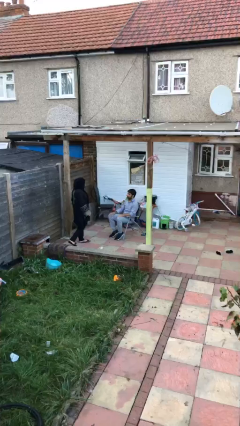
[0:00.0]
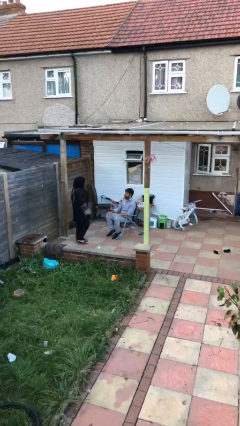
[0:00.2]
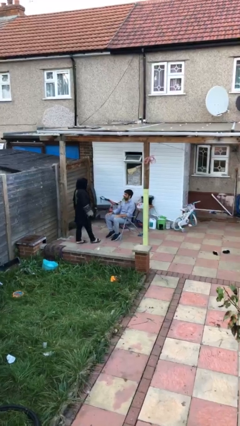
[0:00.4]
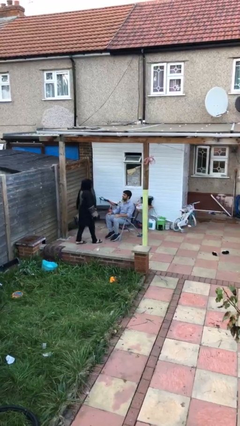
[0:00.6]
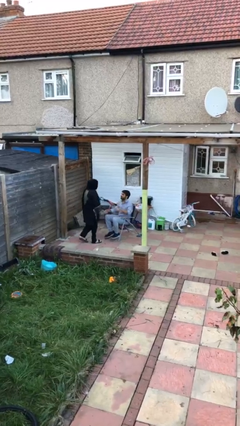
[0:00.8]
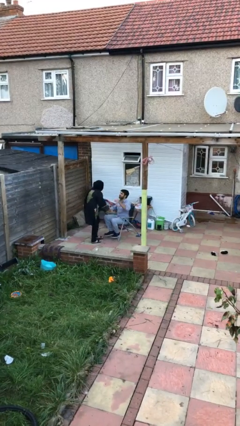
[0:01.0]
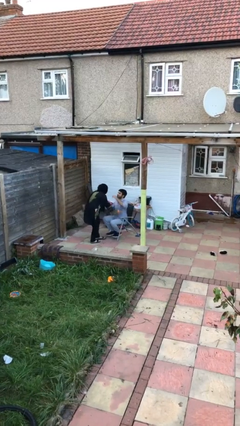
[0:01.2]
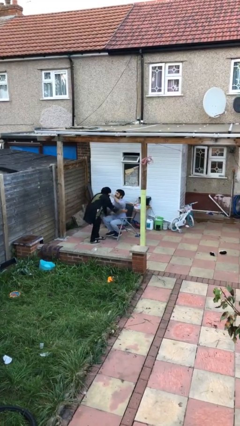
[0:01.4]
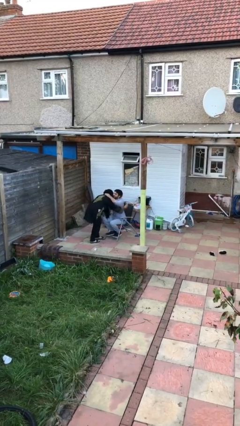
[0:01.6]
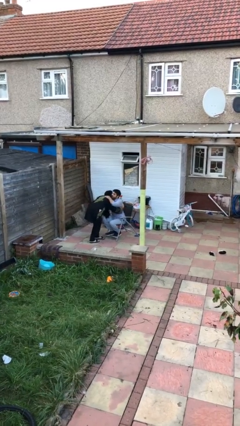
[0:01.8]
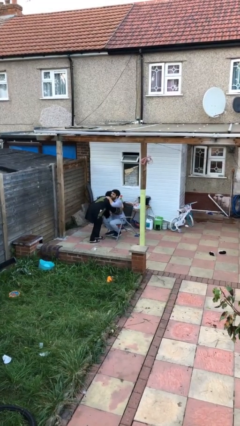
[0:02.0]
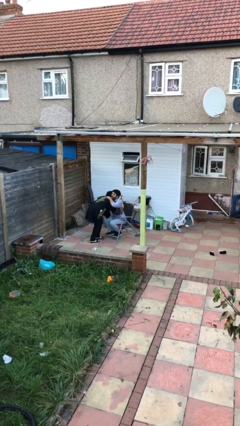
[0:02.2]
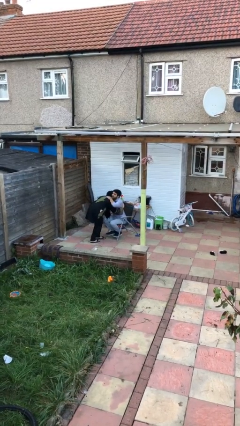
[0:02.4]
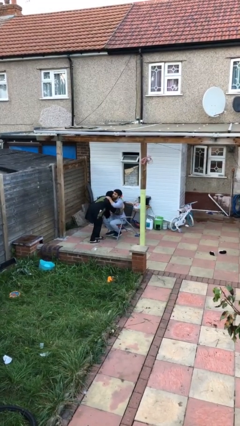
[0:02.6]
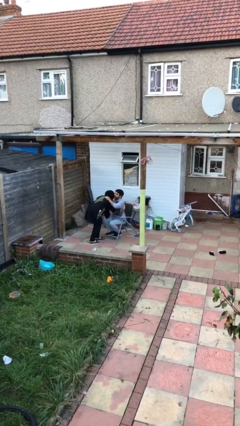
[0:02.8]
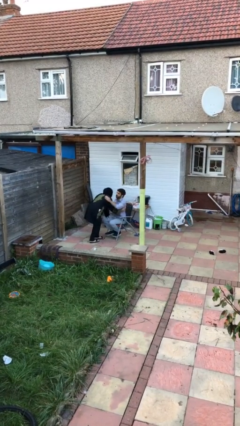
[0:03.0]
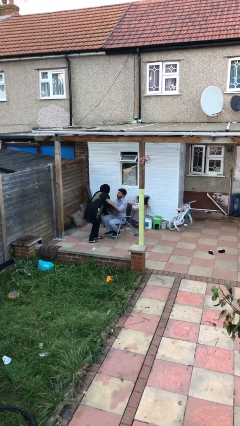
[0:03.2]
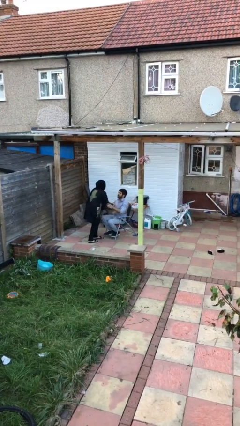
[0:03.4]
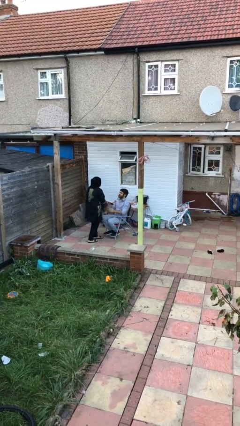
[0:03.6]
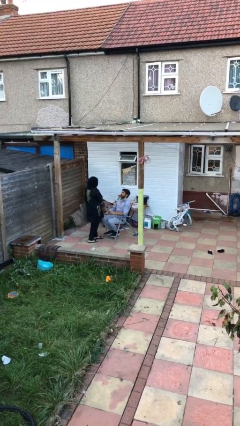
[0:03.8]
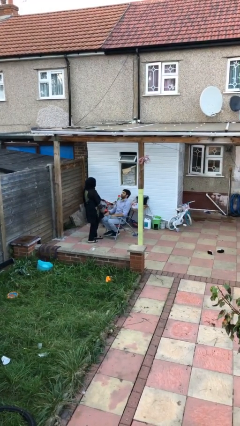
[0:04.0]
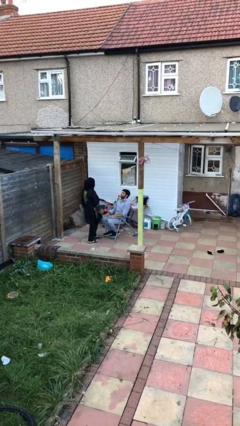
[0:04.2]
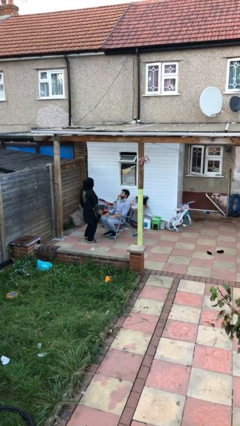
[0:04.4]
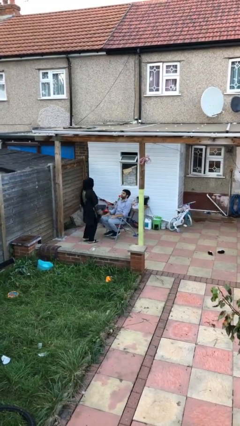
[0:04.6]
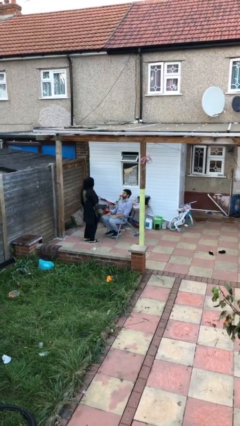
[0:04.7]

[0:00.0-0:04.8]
person embraces person

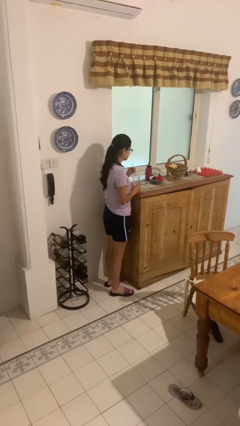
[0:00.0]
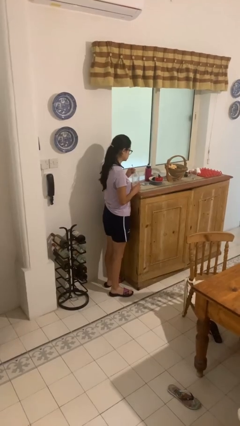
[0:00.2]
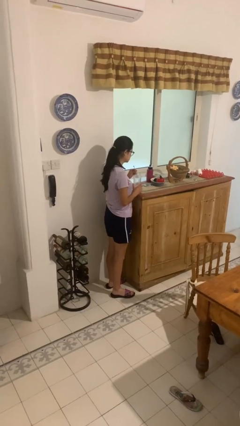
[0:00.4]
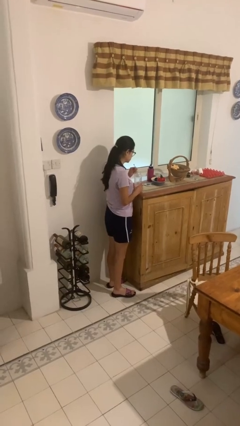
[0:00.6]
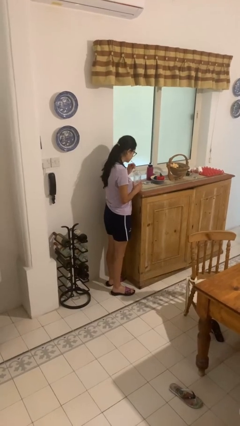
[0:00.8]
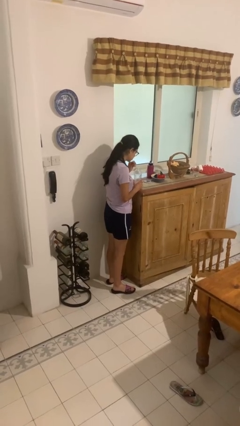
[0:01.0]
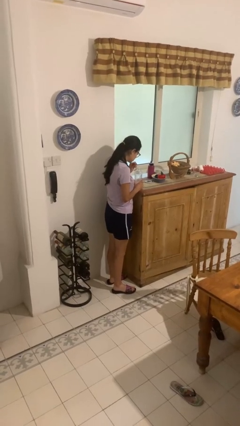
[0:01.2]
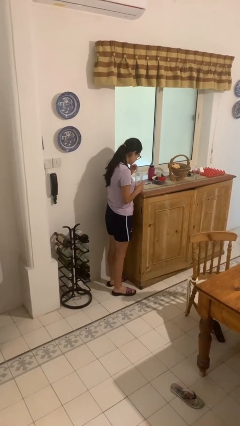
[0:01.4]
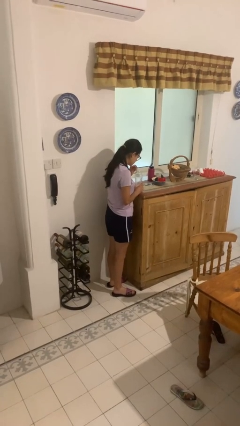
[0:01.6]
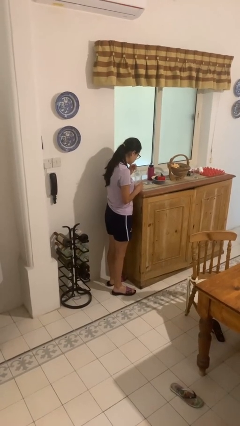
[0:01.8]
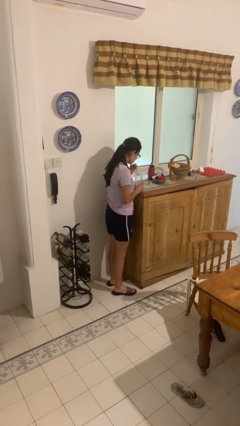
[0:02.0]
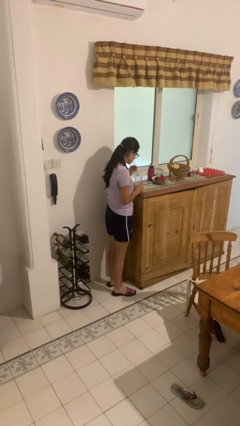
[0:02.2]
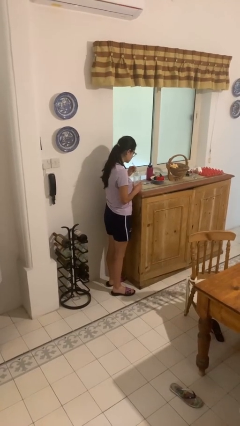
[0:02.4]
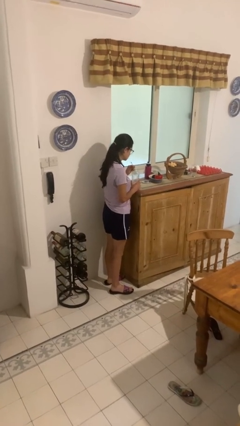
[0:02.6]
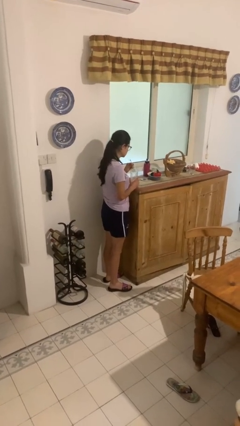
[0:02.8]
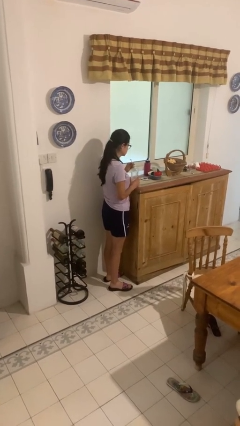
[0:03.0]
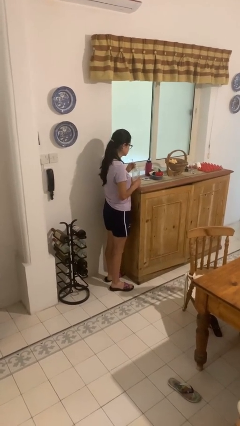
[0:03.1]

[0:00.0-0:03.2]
person drinks from straw

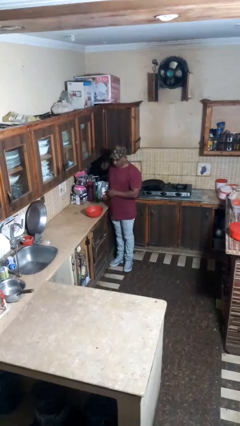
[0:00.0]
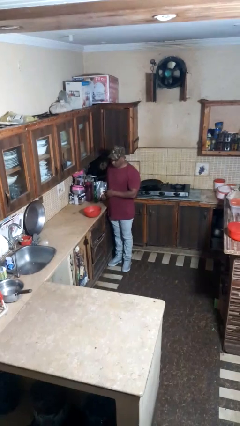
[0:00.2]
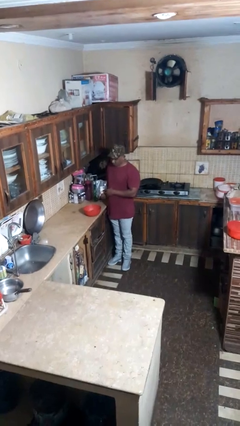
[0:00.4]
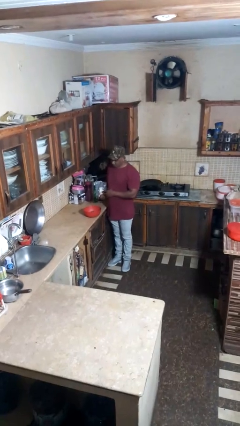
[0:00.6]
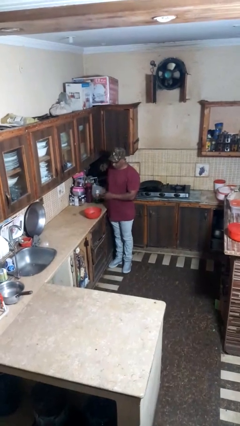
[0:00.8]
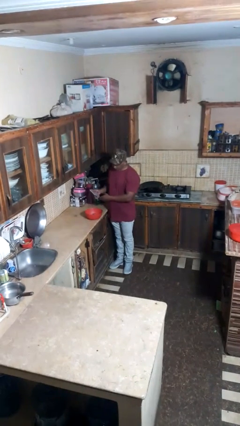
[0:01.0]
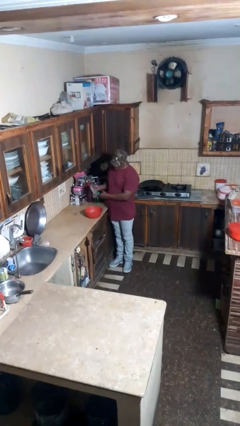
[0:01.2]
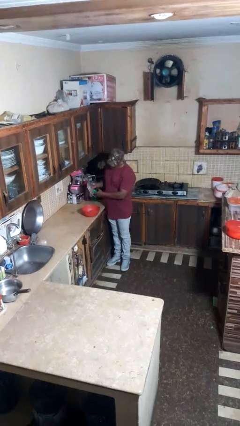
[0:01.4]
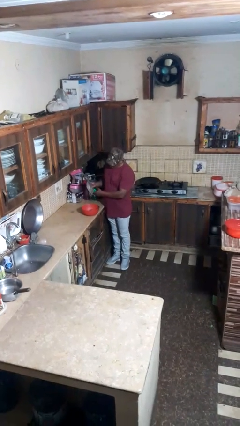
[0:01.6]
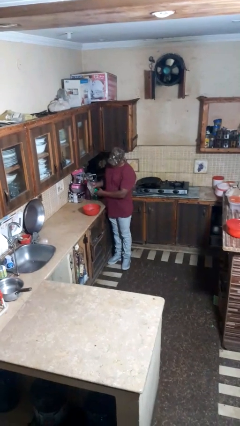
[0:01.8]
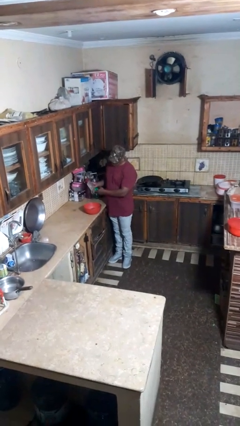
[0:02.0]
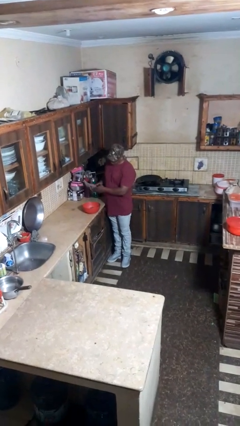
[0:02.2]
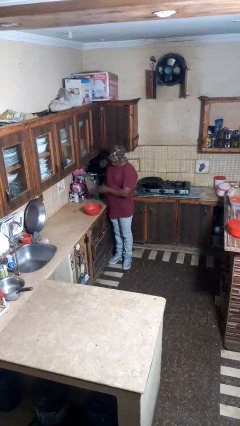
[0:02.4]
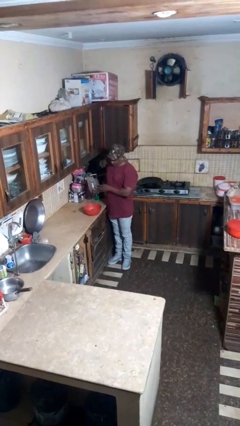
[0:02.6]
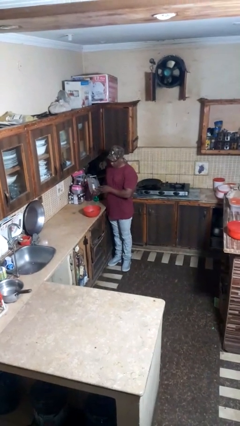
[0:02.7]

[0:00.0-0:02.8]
person pours into bowl

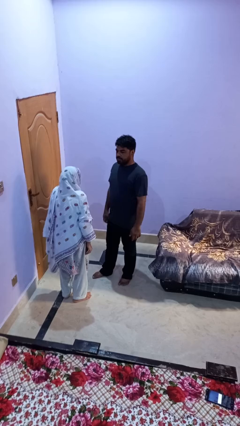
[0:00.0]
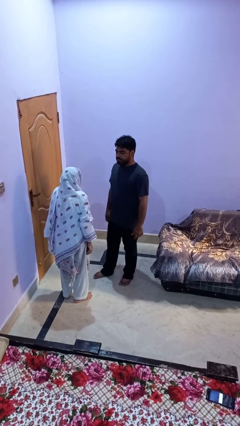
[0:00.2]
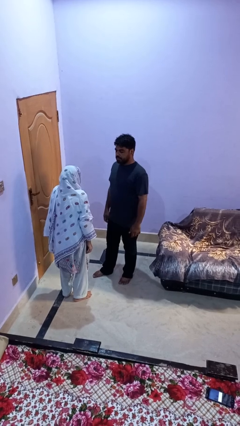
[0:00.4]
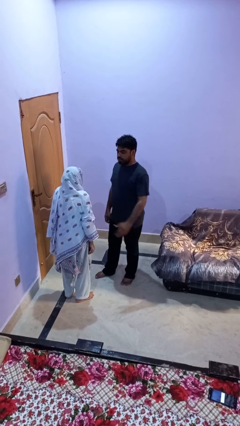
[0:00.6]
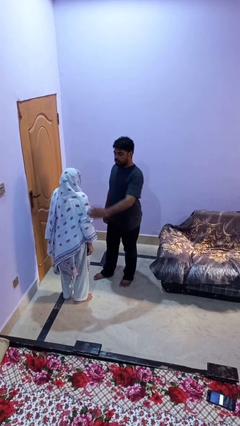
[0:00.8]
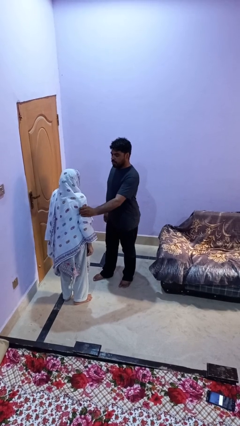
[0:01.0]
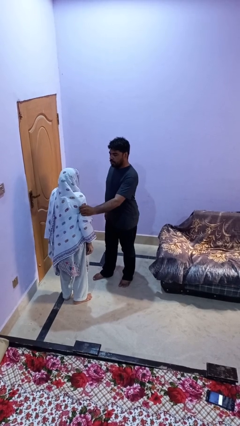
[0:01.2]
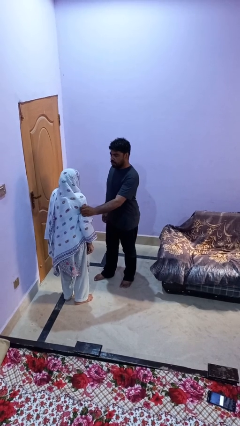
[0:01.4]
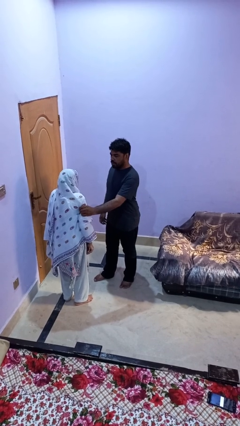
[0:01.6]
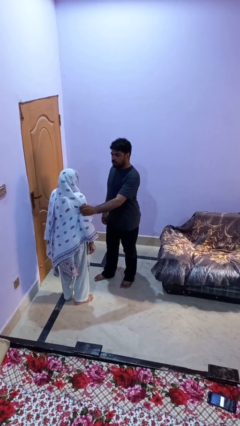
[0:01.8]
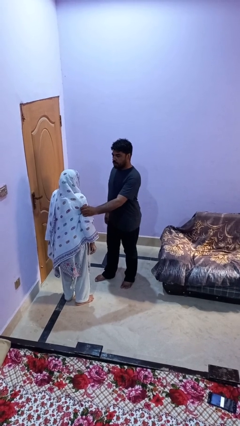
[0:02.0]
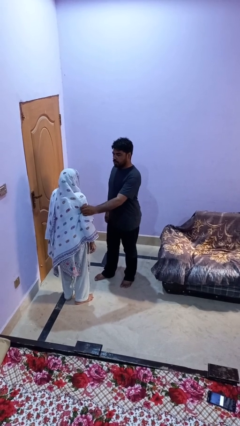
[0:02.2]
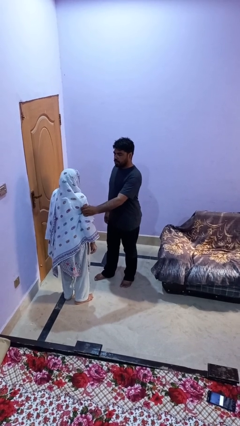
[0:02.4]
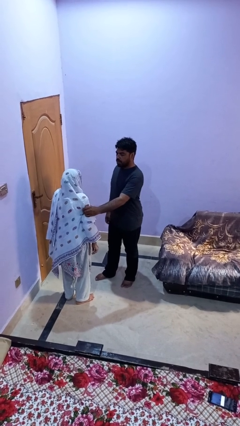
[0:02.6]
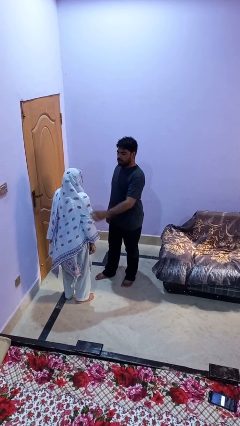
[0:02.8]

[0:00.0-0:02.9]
person grabs person by bicep

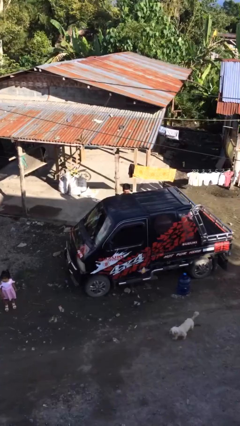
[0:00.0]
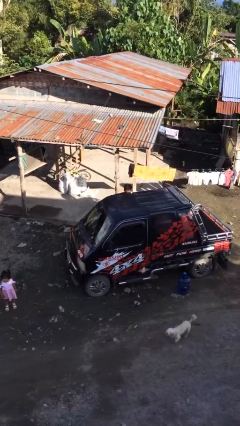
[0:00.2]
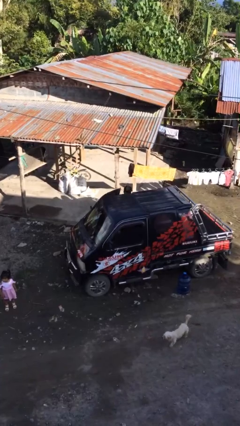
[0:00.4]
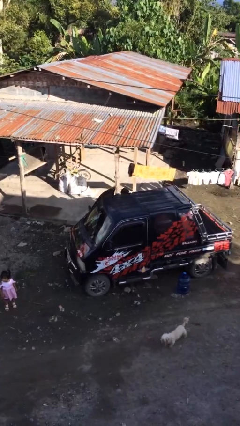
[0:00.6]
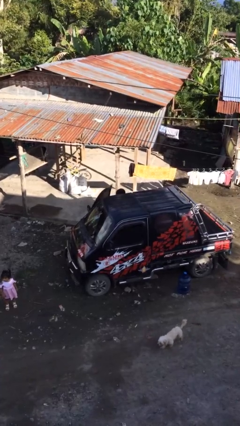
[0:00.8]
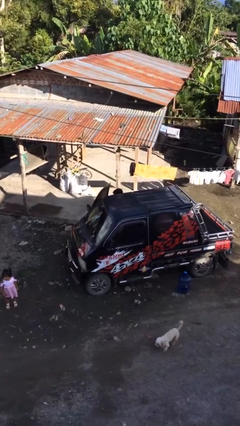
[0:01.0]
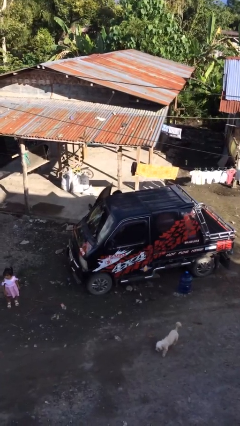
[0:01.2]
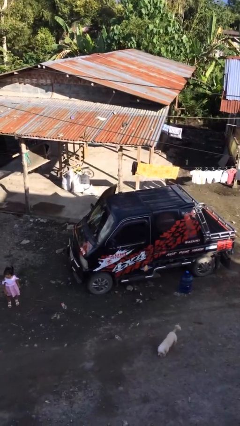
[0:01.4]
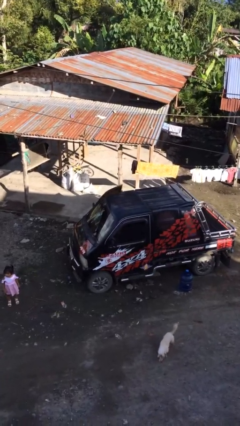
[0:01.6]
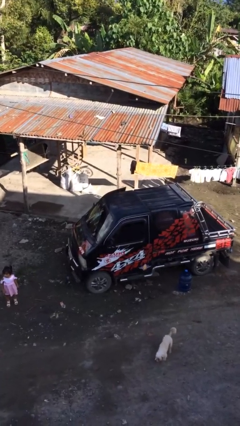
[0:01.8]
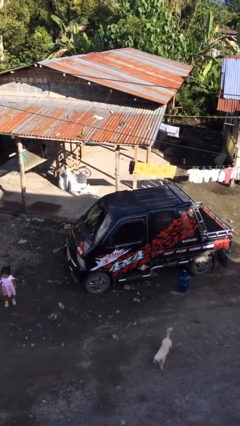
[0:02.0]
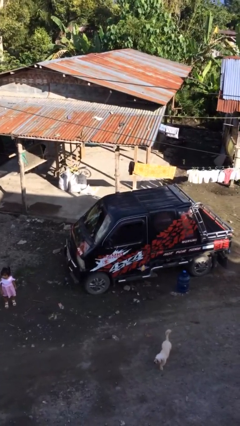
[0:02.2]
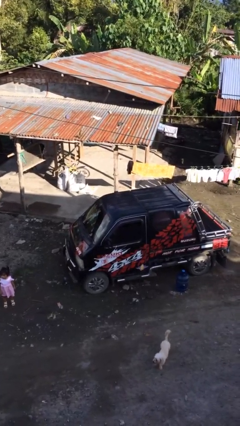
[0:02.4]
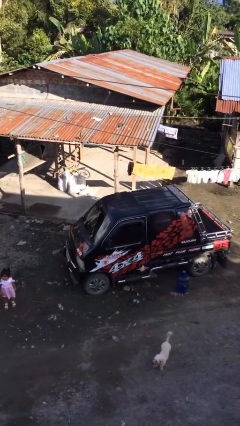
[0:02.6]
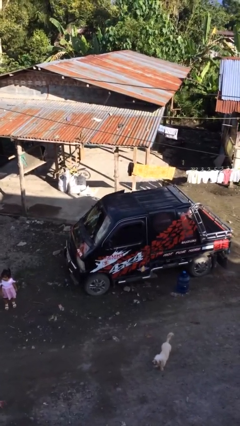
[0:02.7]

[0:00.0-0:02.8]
person enters car

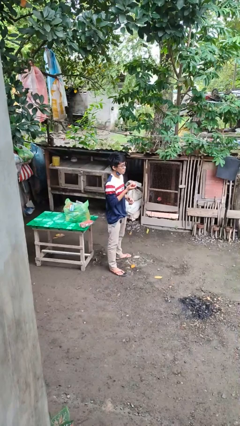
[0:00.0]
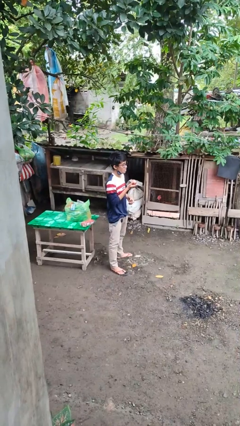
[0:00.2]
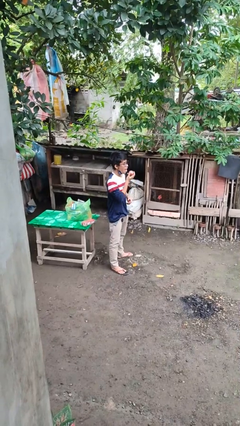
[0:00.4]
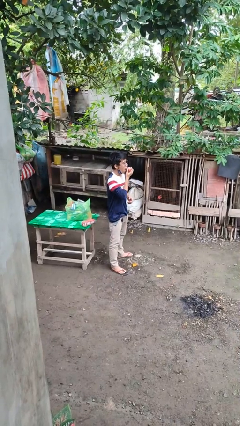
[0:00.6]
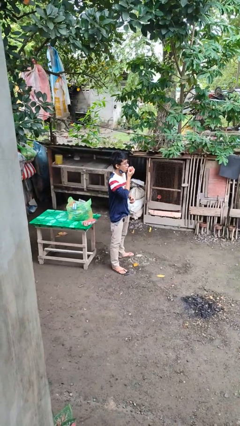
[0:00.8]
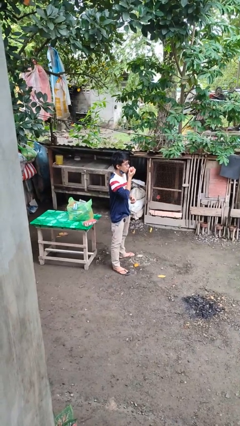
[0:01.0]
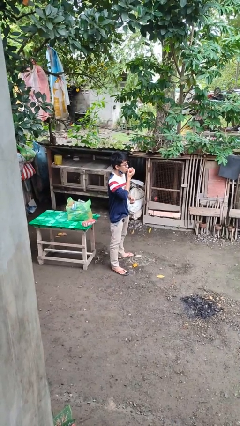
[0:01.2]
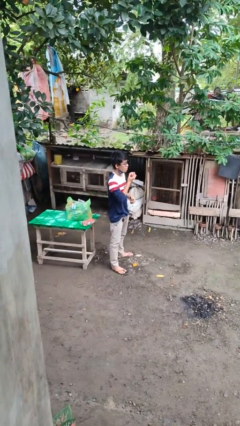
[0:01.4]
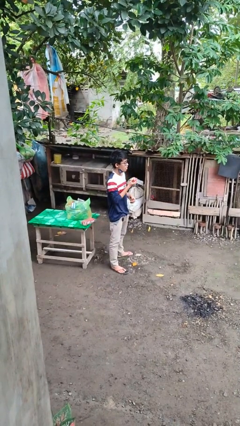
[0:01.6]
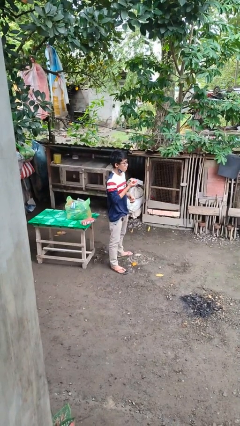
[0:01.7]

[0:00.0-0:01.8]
person eats apple
